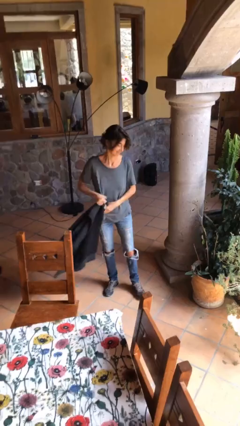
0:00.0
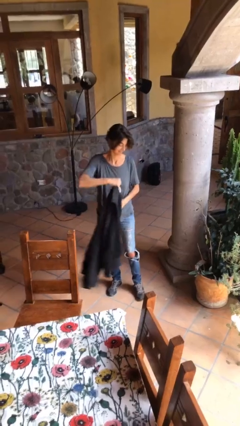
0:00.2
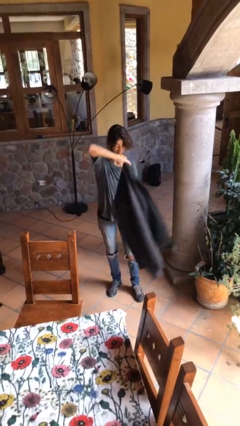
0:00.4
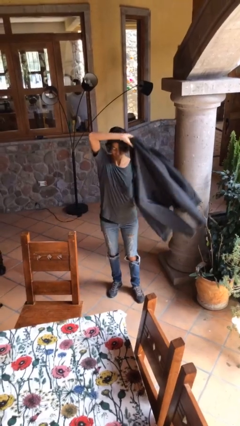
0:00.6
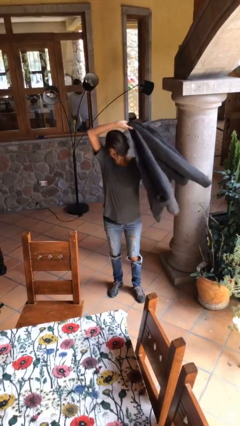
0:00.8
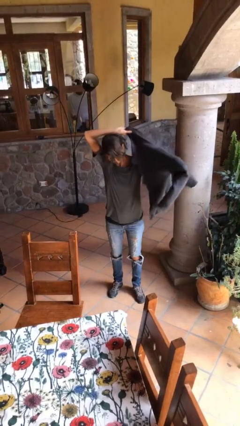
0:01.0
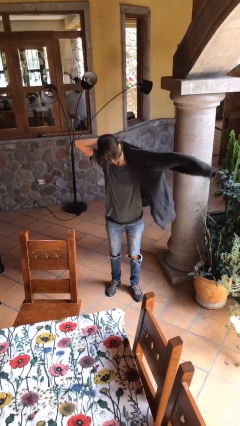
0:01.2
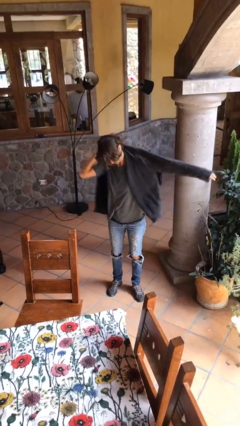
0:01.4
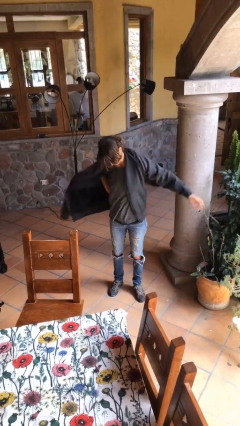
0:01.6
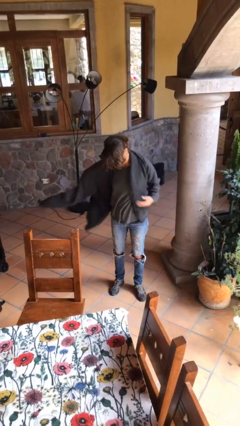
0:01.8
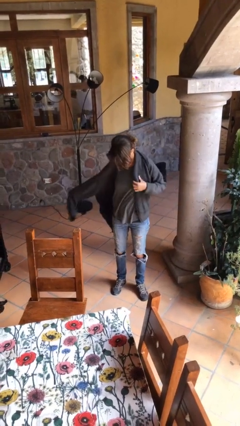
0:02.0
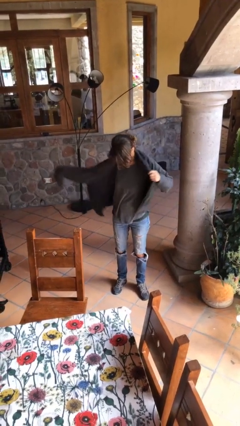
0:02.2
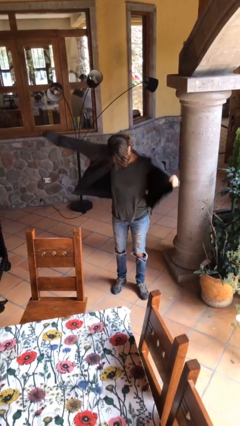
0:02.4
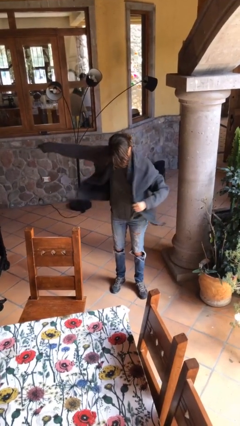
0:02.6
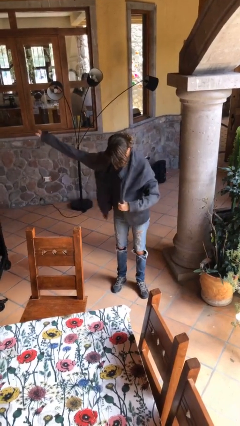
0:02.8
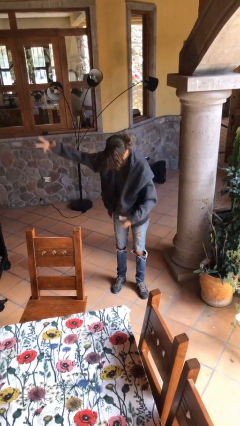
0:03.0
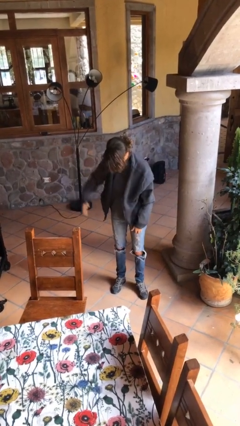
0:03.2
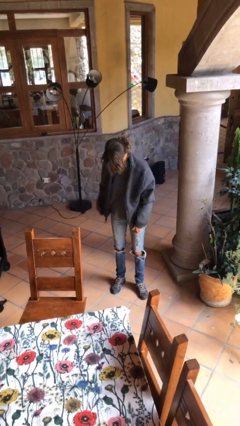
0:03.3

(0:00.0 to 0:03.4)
person puts on jacket

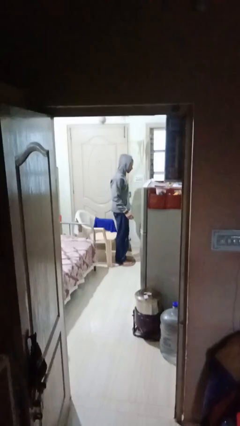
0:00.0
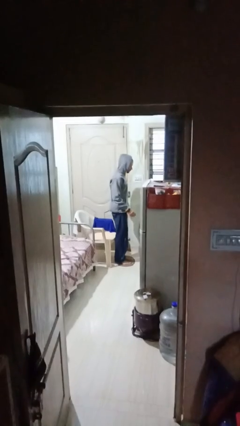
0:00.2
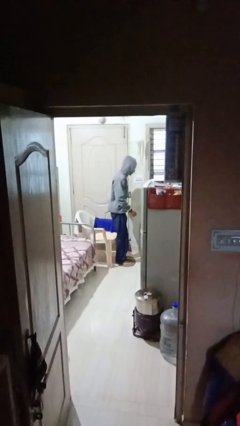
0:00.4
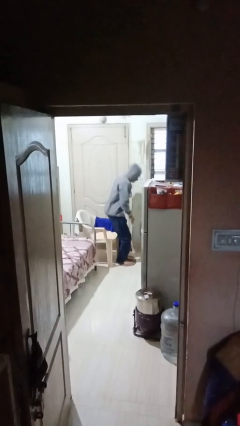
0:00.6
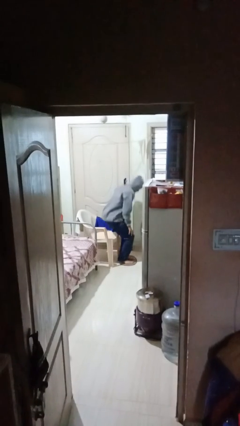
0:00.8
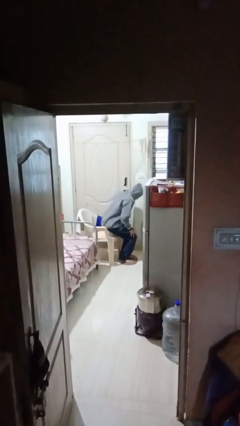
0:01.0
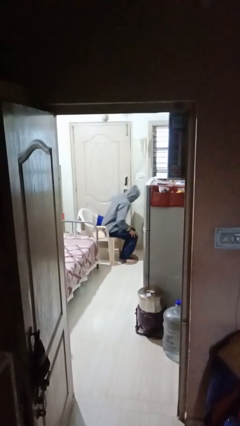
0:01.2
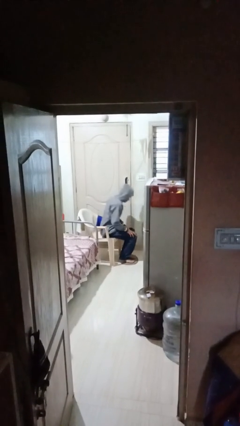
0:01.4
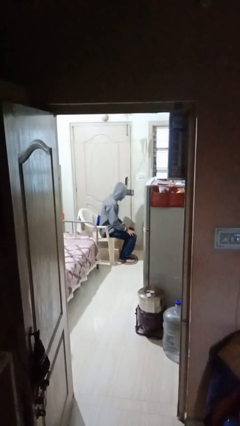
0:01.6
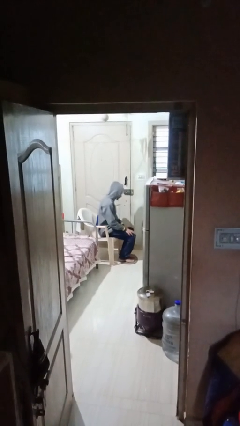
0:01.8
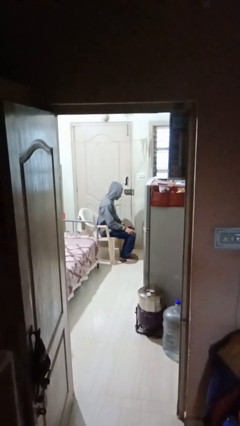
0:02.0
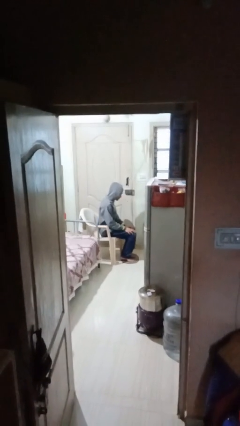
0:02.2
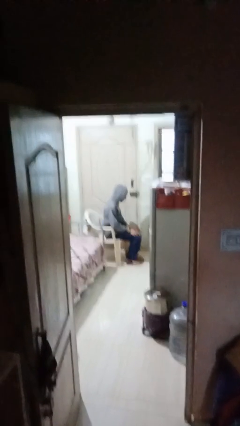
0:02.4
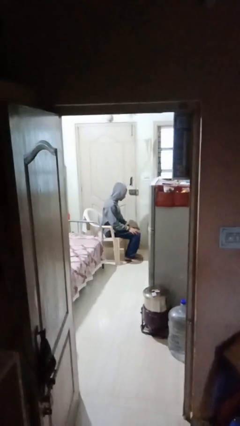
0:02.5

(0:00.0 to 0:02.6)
person sits down

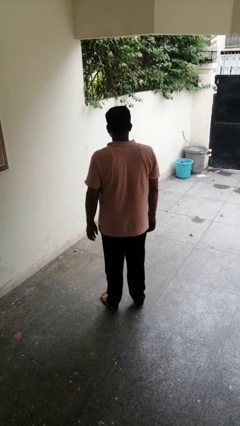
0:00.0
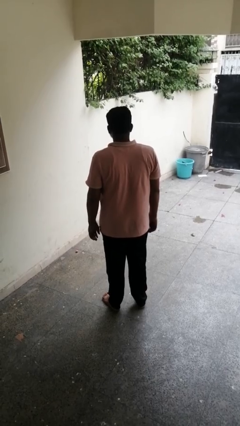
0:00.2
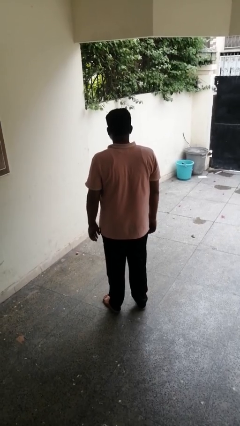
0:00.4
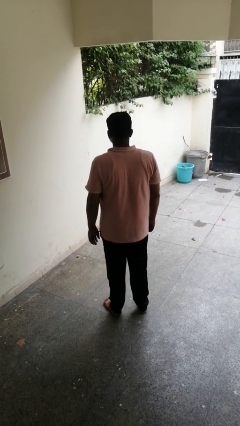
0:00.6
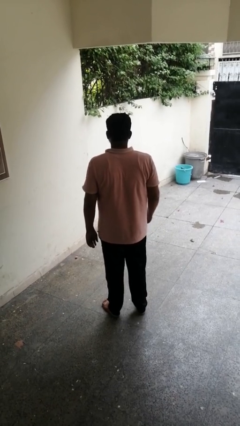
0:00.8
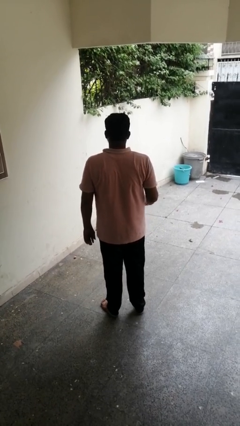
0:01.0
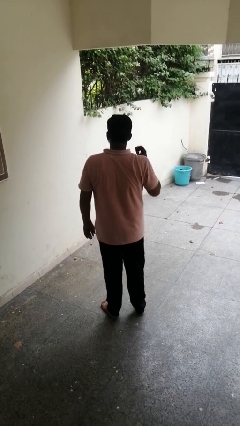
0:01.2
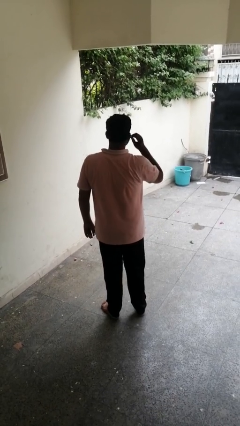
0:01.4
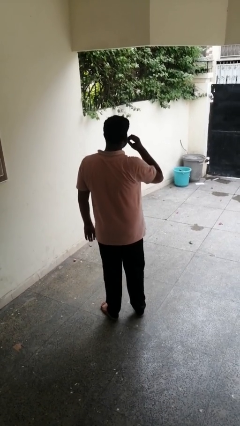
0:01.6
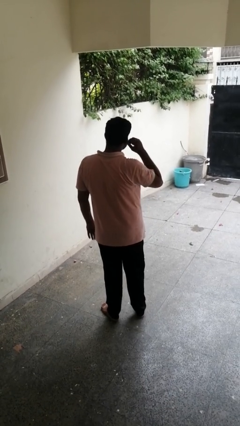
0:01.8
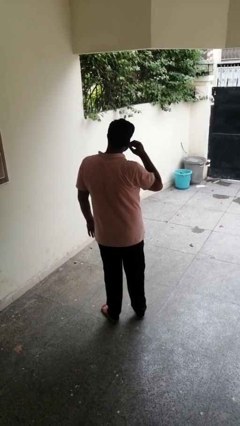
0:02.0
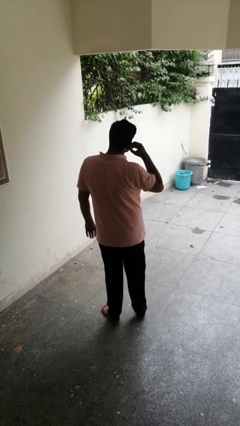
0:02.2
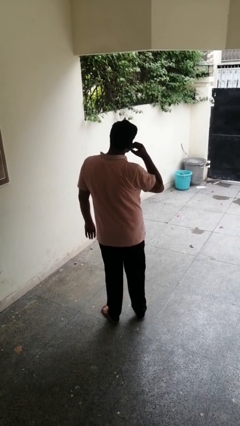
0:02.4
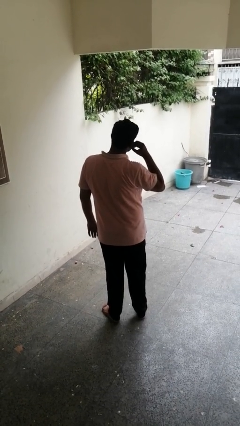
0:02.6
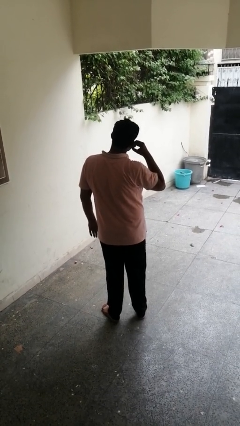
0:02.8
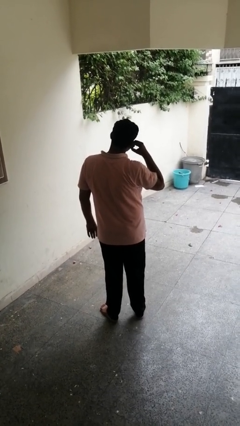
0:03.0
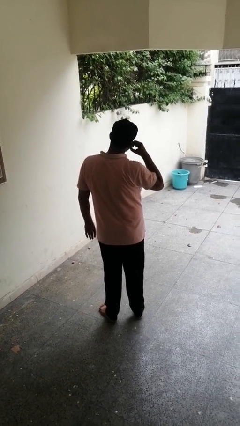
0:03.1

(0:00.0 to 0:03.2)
person touches earlobe

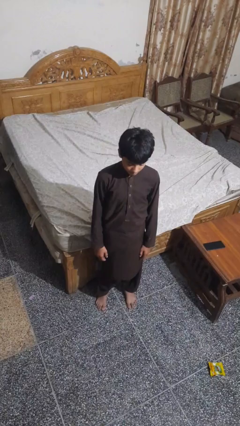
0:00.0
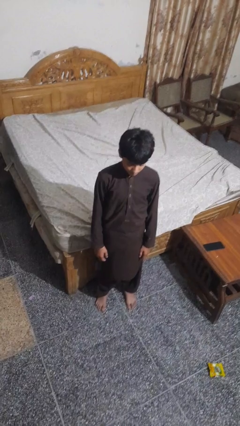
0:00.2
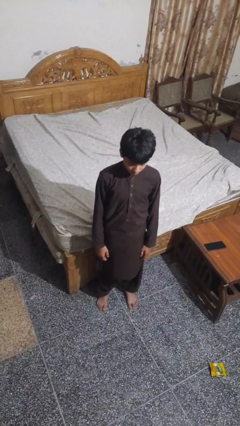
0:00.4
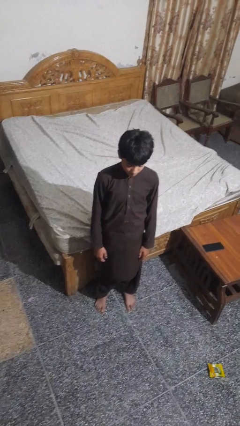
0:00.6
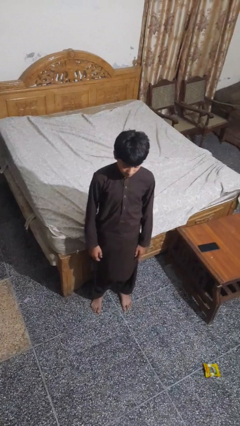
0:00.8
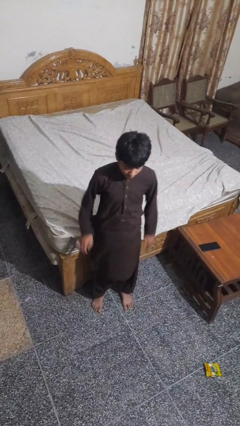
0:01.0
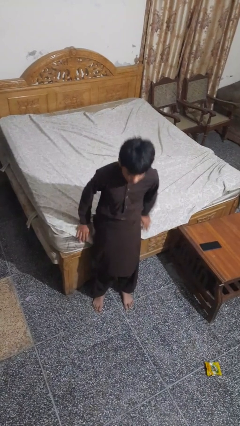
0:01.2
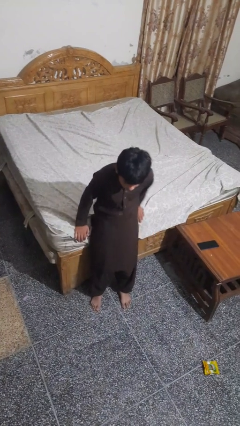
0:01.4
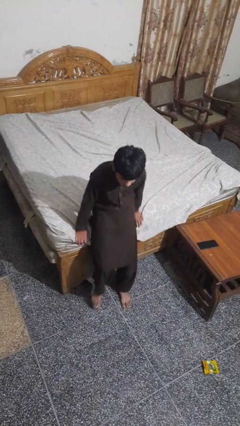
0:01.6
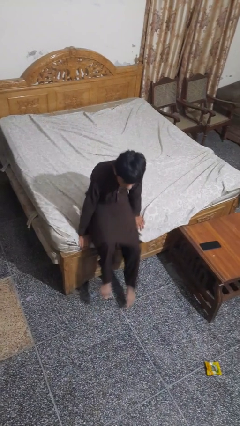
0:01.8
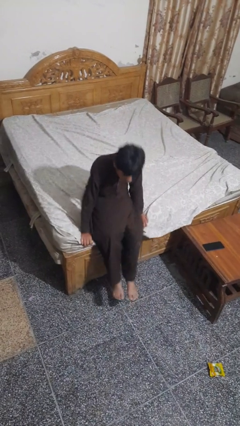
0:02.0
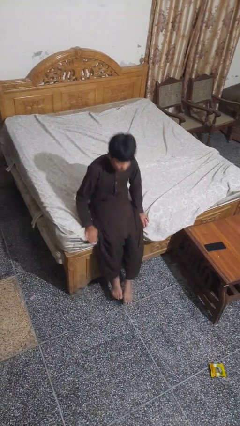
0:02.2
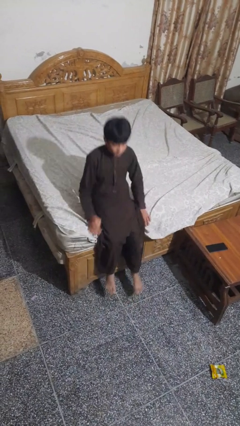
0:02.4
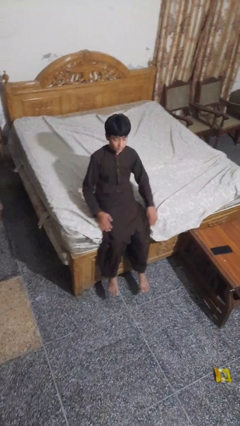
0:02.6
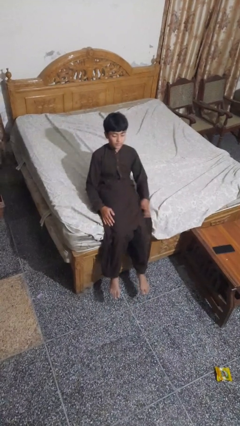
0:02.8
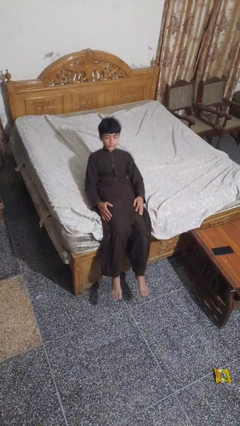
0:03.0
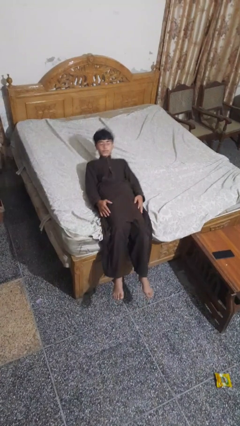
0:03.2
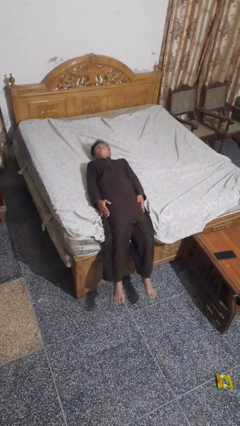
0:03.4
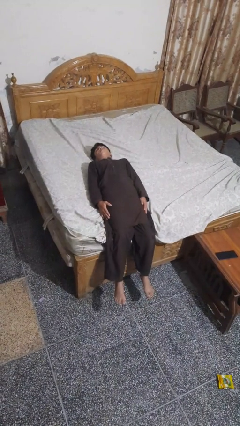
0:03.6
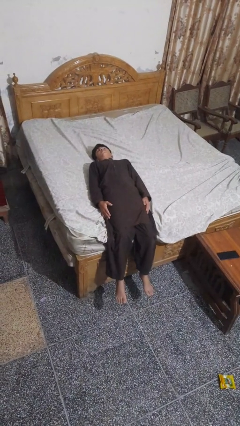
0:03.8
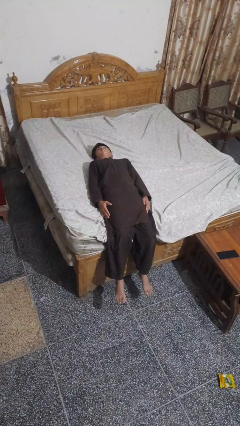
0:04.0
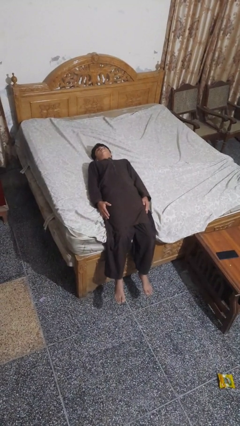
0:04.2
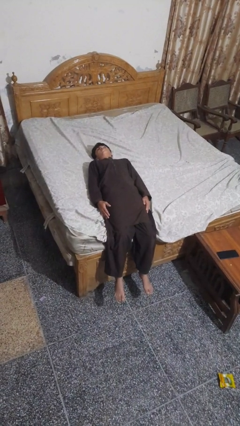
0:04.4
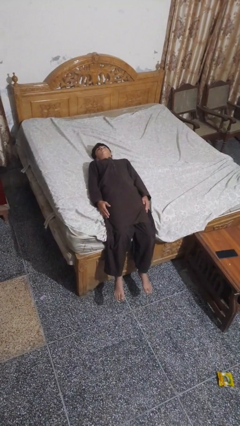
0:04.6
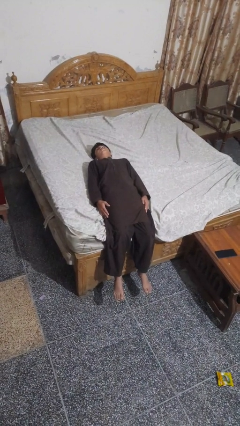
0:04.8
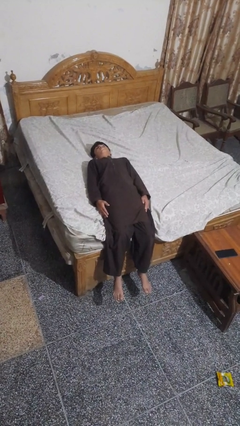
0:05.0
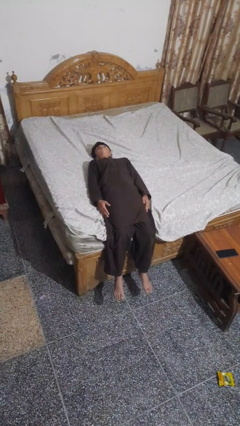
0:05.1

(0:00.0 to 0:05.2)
person lies down on bed

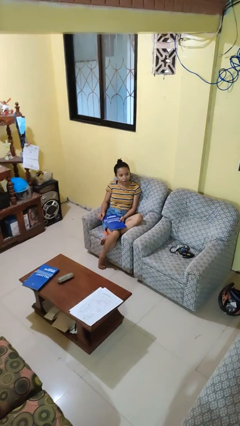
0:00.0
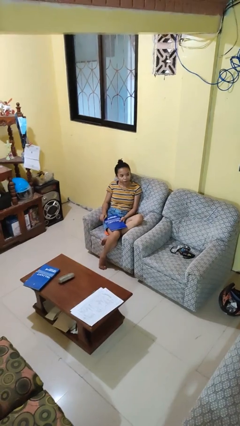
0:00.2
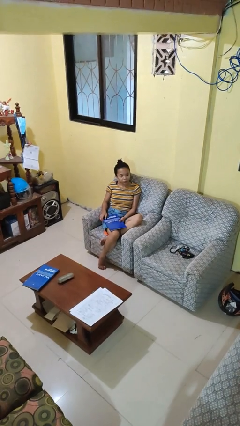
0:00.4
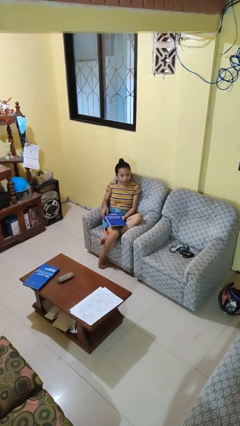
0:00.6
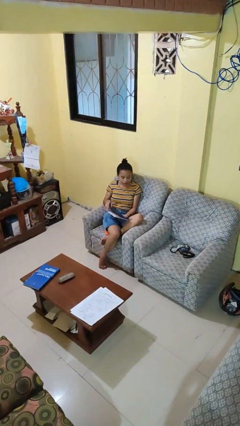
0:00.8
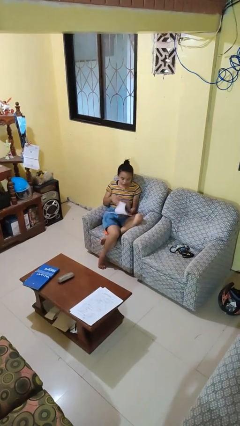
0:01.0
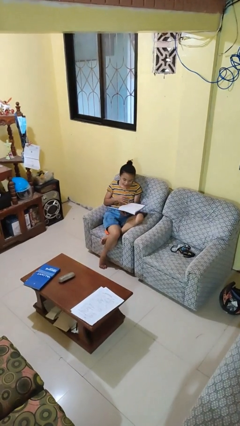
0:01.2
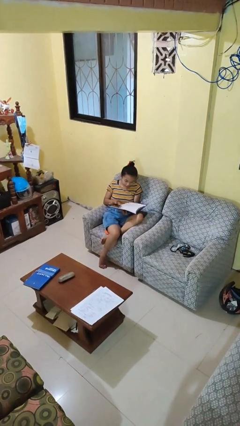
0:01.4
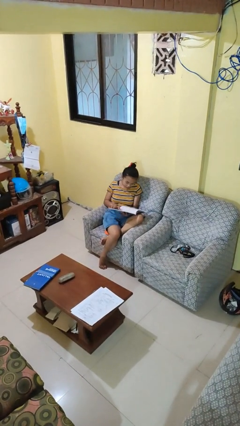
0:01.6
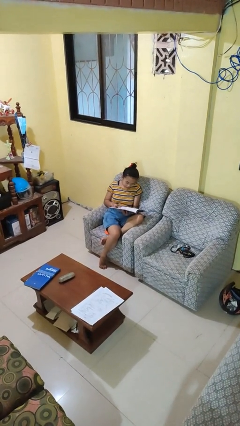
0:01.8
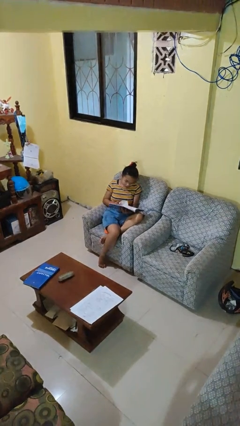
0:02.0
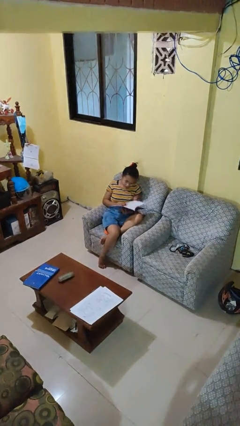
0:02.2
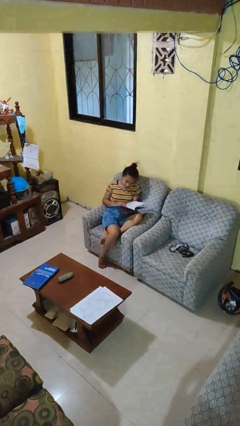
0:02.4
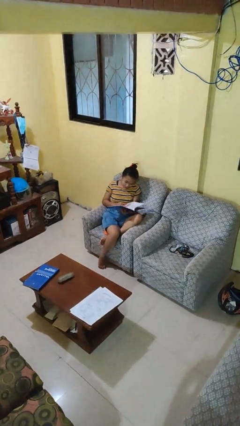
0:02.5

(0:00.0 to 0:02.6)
person reads book

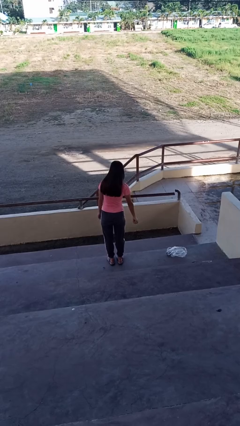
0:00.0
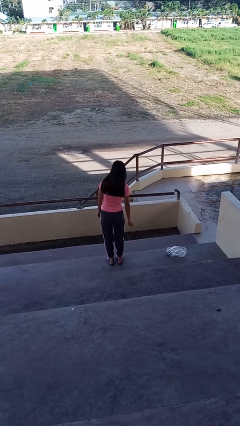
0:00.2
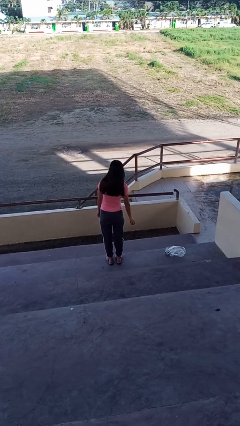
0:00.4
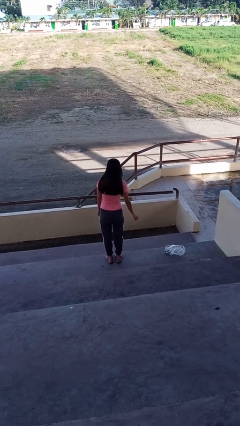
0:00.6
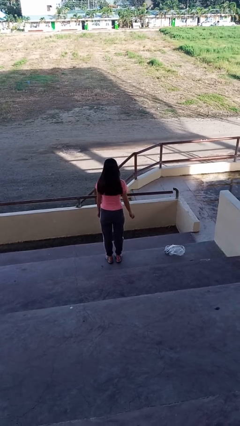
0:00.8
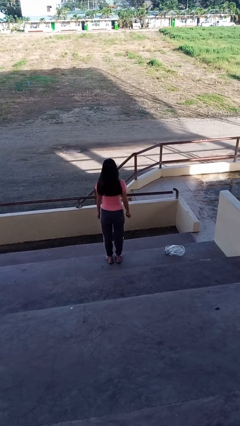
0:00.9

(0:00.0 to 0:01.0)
person catches dropped object
